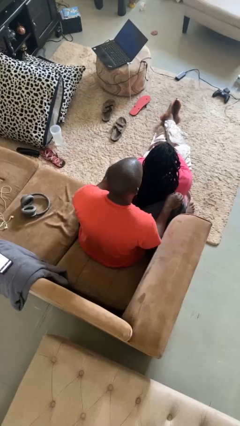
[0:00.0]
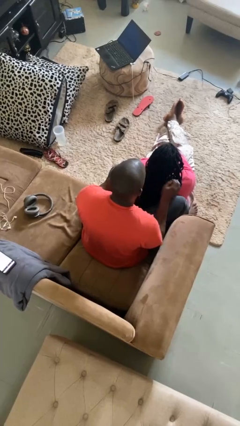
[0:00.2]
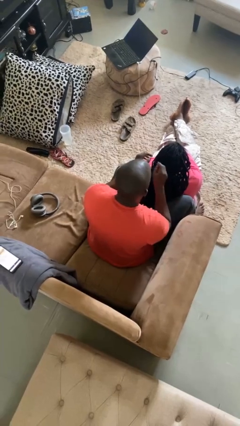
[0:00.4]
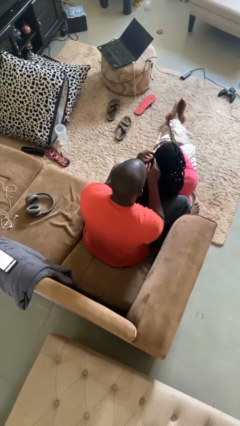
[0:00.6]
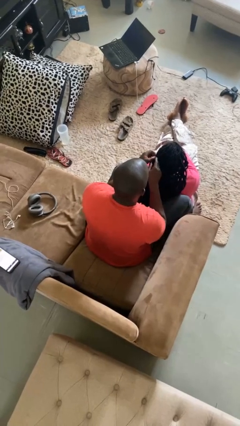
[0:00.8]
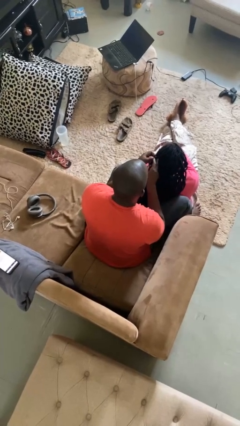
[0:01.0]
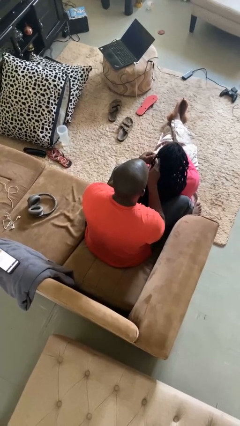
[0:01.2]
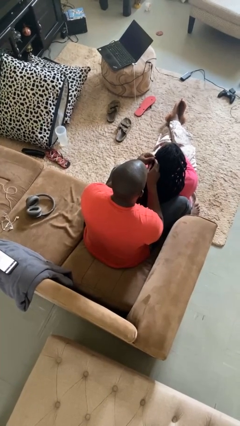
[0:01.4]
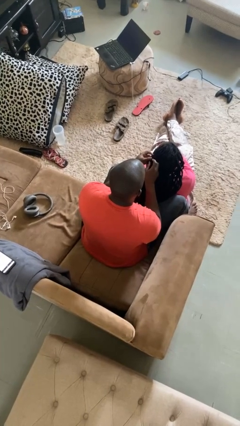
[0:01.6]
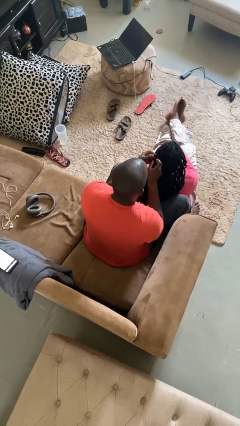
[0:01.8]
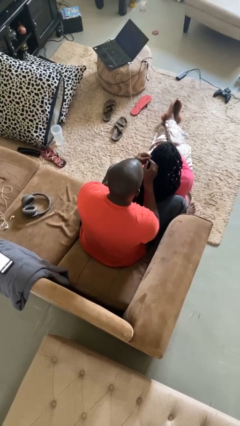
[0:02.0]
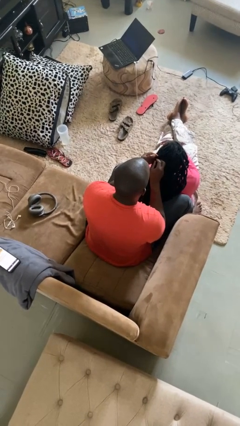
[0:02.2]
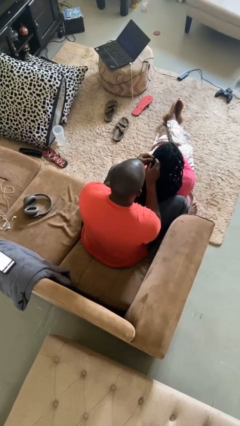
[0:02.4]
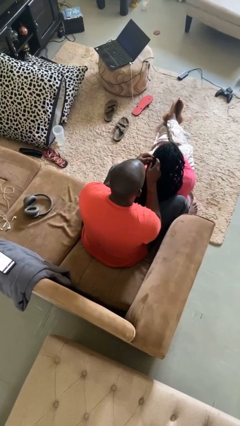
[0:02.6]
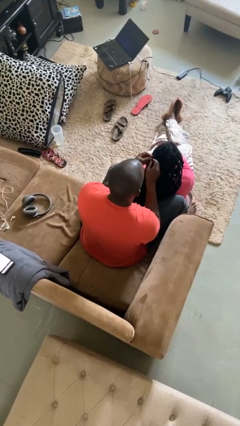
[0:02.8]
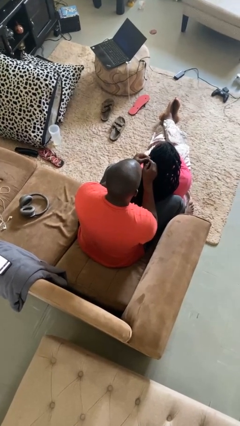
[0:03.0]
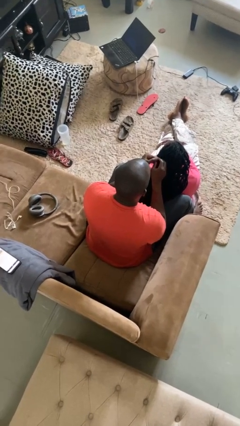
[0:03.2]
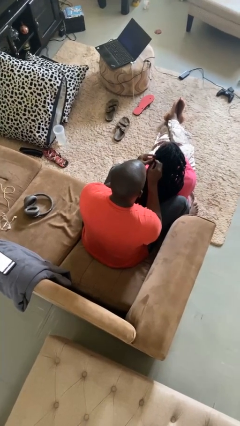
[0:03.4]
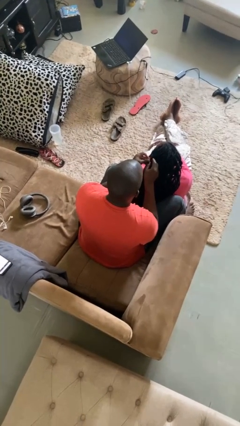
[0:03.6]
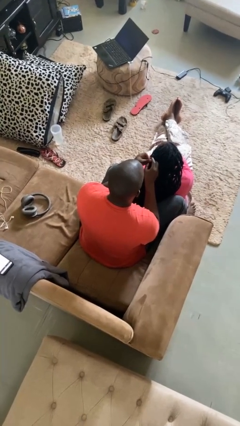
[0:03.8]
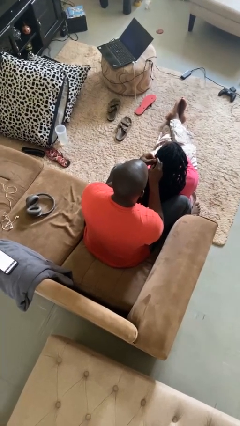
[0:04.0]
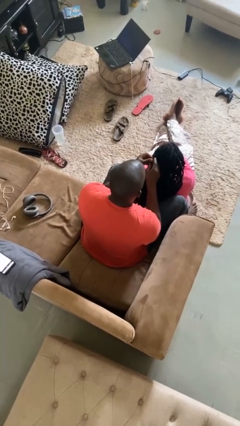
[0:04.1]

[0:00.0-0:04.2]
person braids hair of person

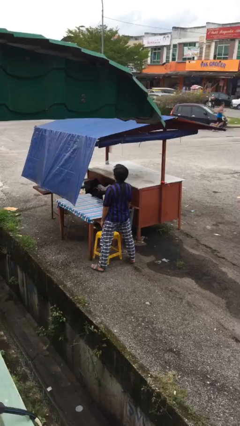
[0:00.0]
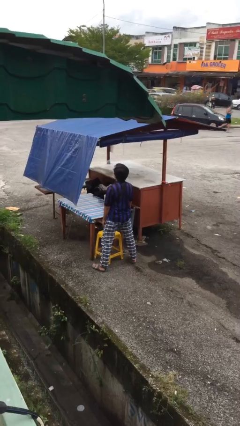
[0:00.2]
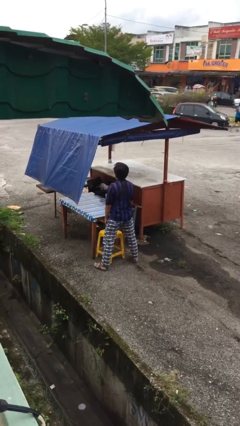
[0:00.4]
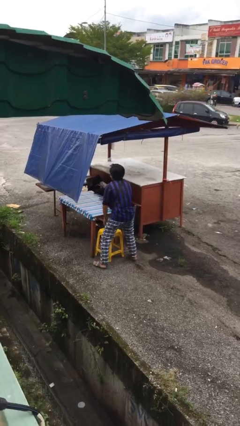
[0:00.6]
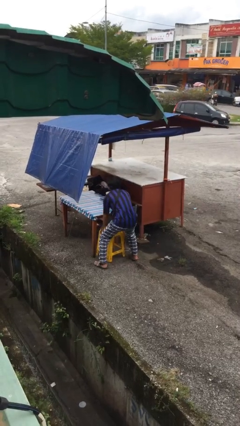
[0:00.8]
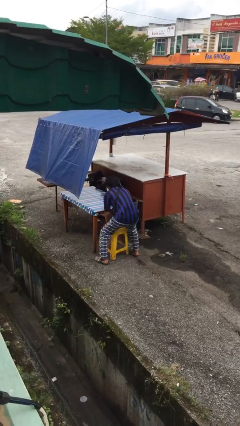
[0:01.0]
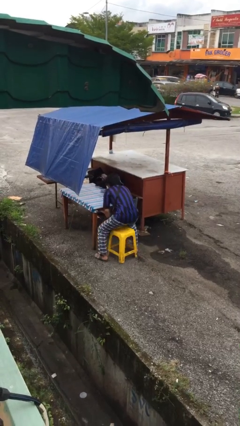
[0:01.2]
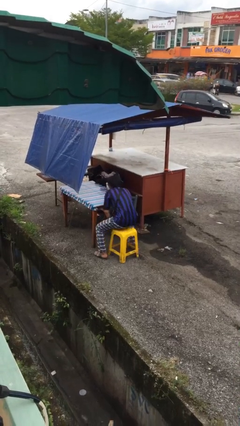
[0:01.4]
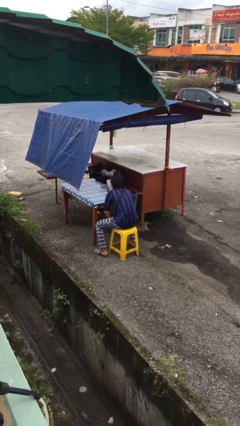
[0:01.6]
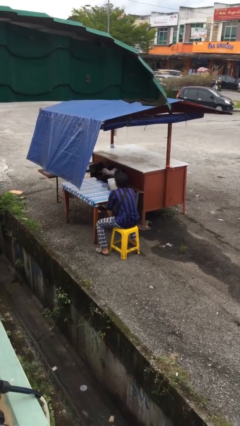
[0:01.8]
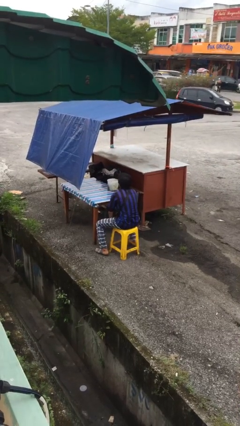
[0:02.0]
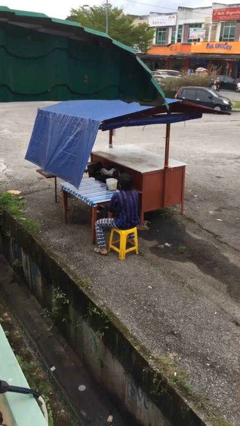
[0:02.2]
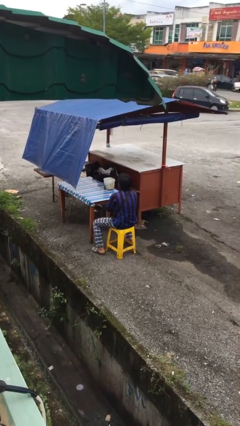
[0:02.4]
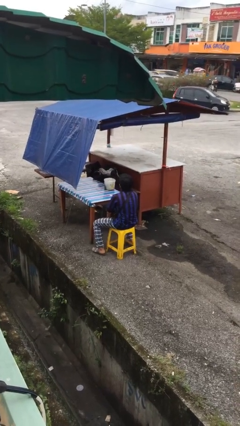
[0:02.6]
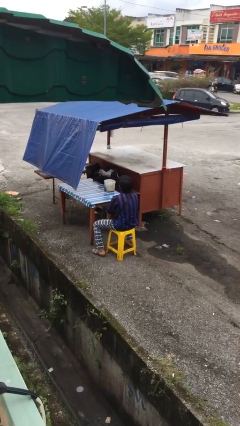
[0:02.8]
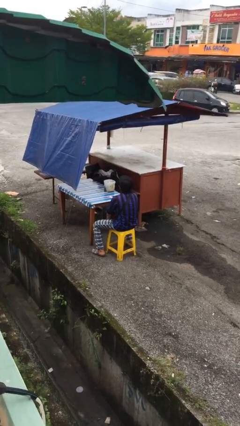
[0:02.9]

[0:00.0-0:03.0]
person sits down

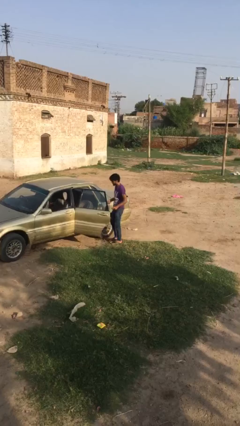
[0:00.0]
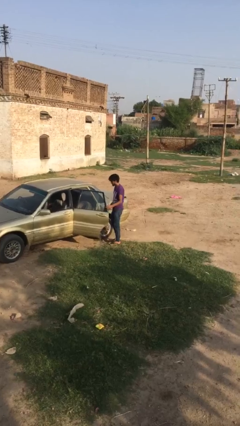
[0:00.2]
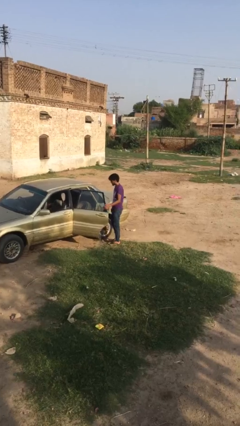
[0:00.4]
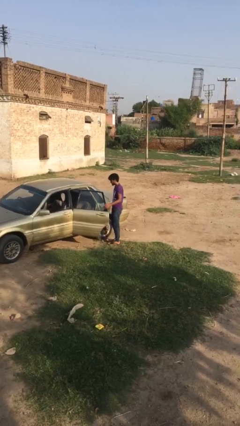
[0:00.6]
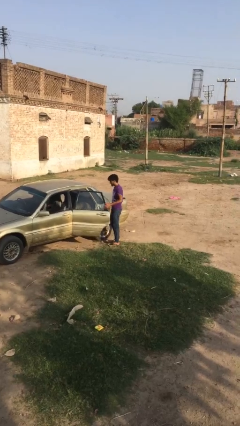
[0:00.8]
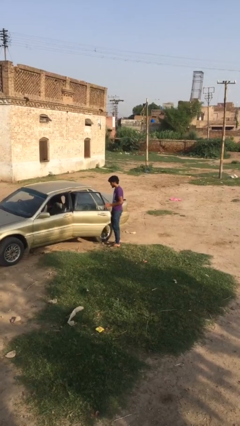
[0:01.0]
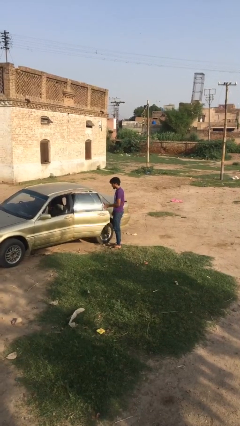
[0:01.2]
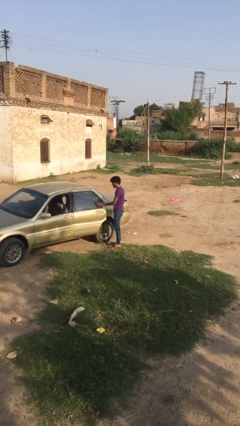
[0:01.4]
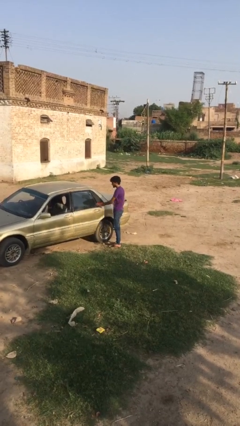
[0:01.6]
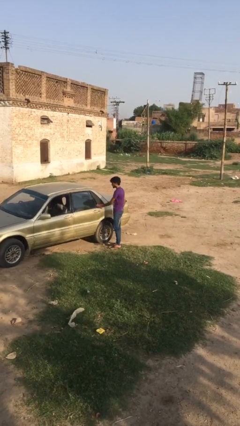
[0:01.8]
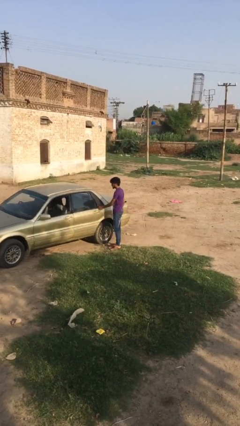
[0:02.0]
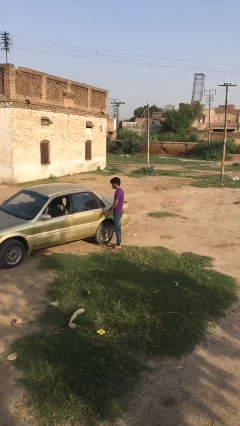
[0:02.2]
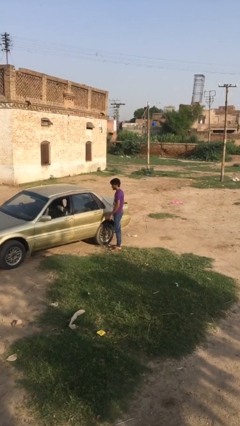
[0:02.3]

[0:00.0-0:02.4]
person closes car door

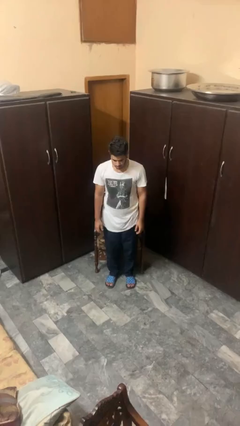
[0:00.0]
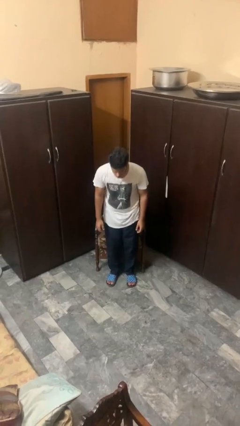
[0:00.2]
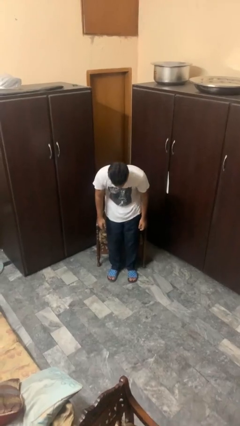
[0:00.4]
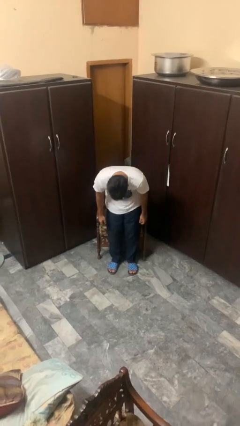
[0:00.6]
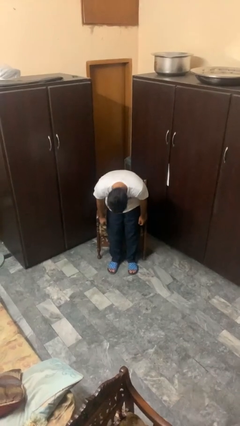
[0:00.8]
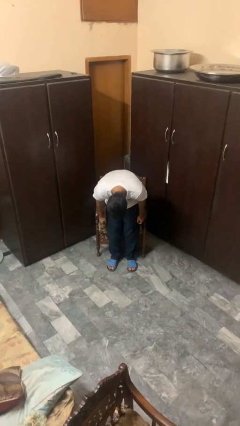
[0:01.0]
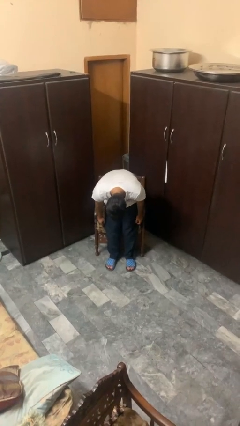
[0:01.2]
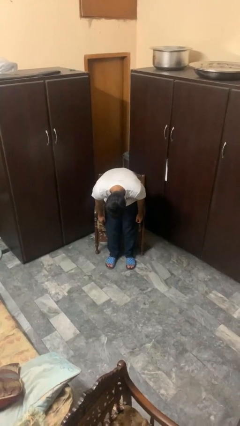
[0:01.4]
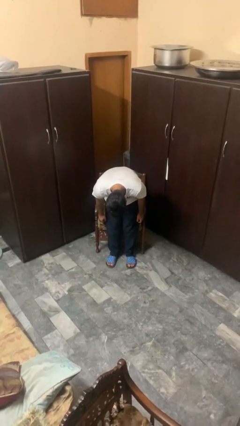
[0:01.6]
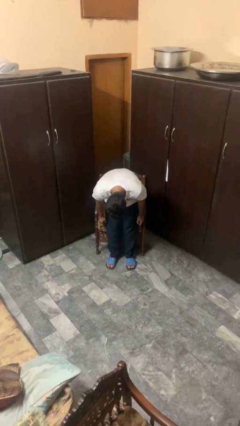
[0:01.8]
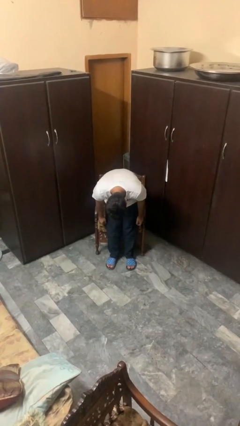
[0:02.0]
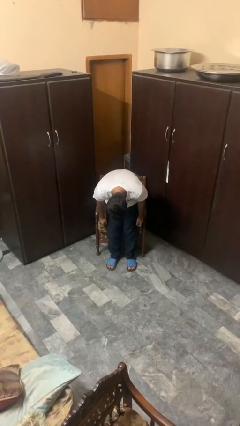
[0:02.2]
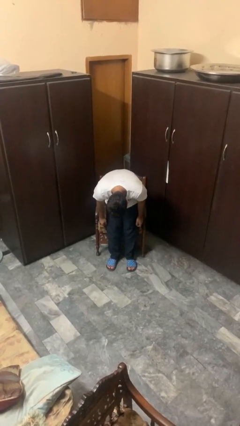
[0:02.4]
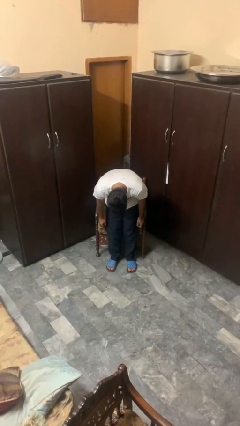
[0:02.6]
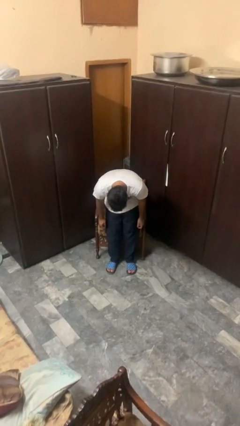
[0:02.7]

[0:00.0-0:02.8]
person bows

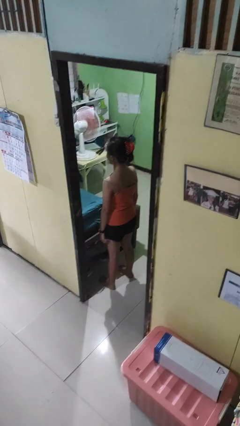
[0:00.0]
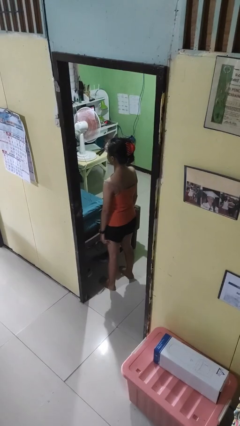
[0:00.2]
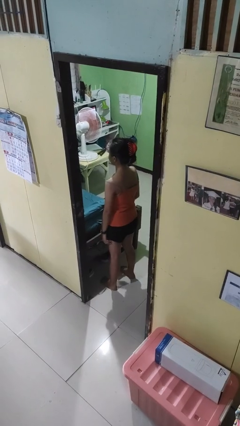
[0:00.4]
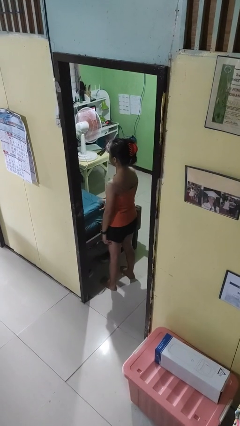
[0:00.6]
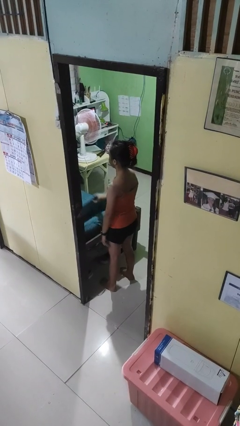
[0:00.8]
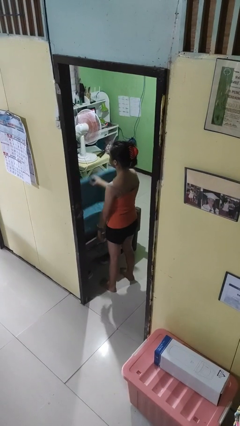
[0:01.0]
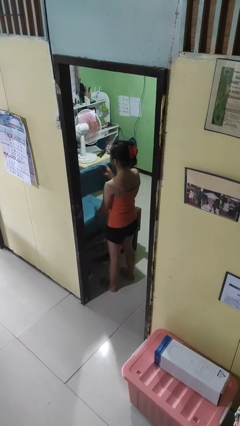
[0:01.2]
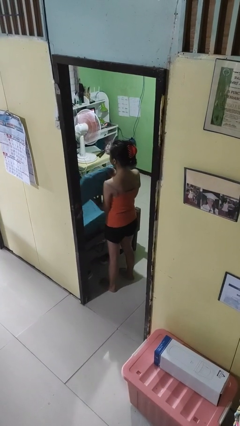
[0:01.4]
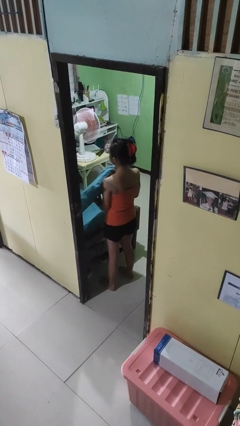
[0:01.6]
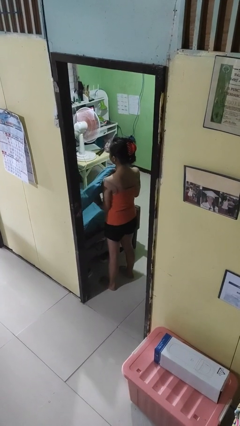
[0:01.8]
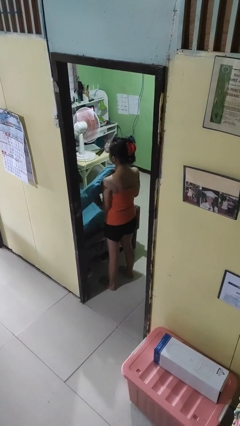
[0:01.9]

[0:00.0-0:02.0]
person picks up object from bed

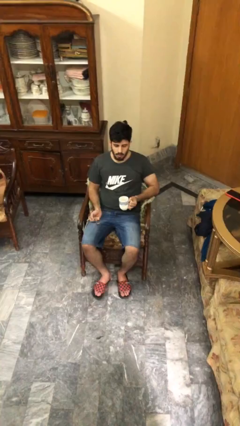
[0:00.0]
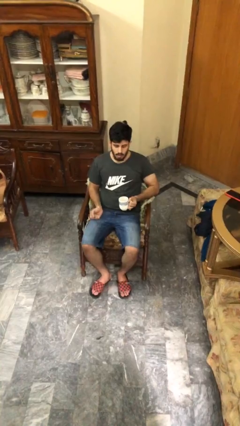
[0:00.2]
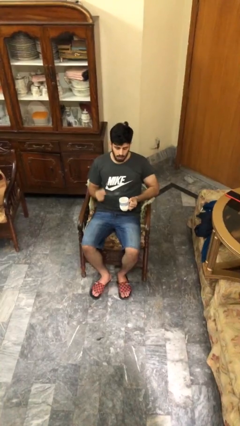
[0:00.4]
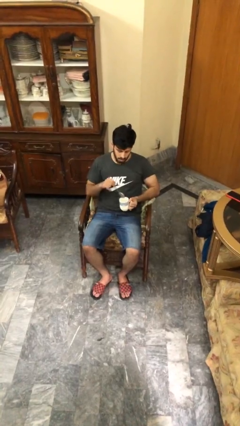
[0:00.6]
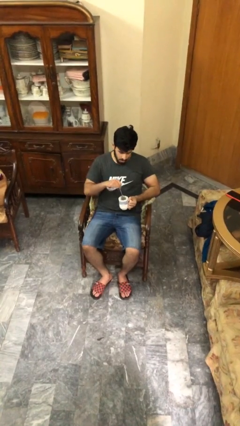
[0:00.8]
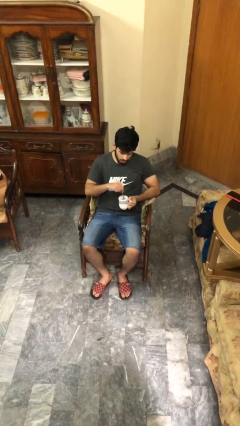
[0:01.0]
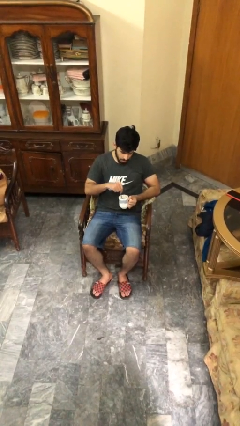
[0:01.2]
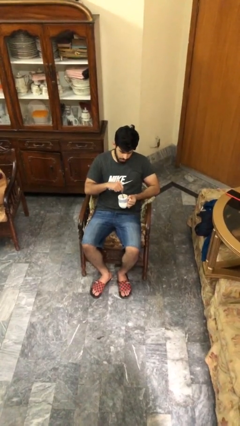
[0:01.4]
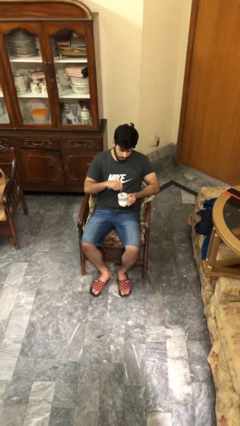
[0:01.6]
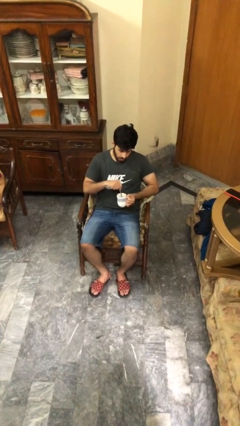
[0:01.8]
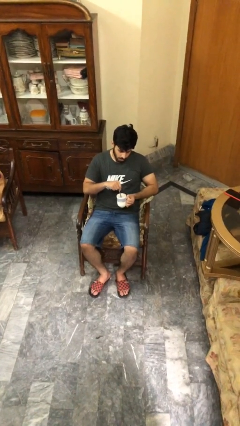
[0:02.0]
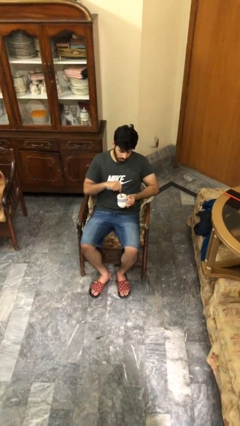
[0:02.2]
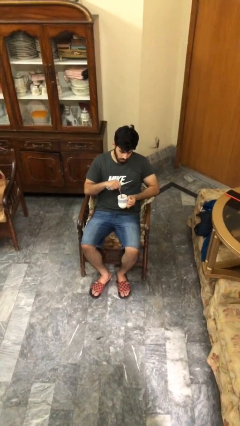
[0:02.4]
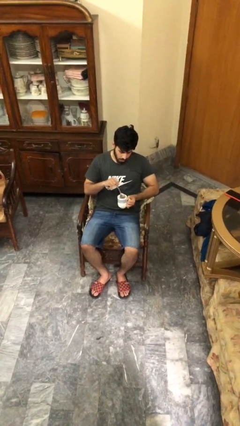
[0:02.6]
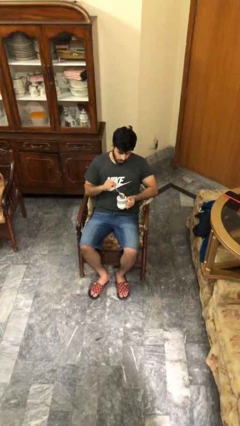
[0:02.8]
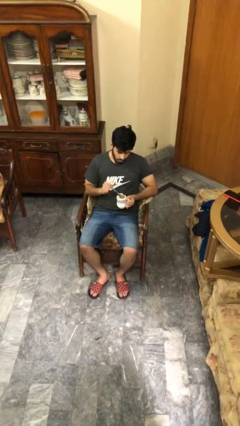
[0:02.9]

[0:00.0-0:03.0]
person stirs mug
